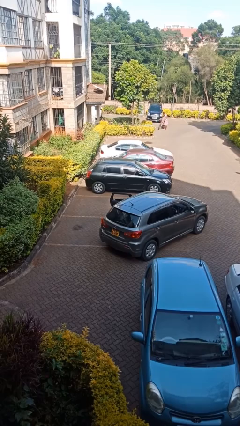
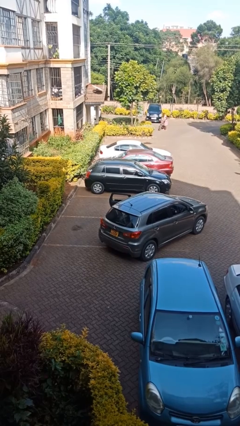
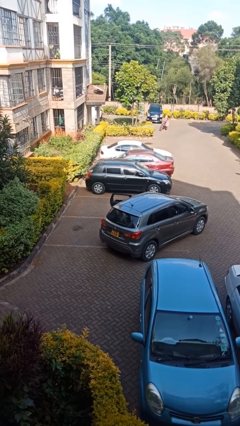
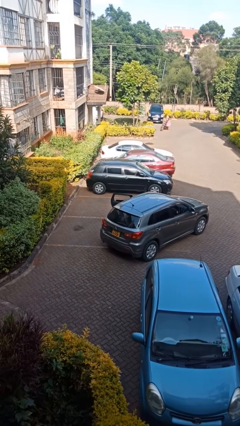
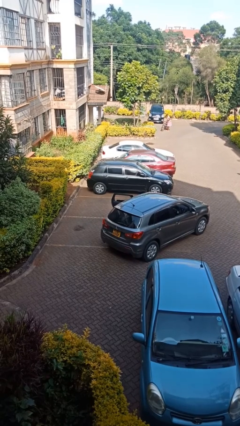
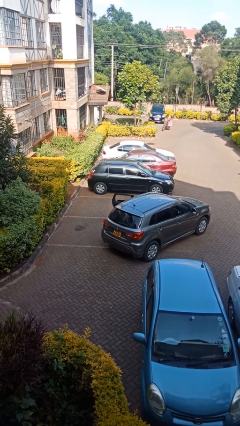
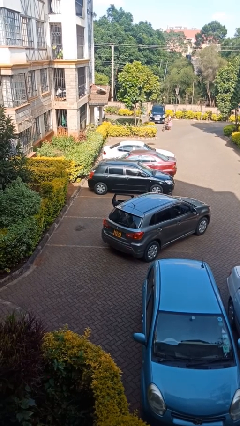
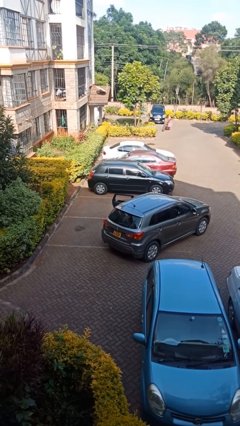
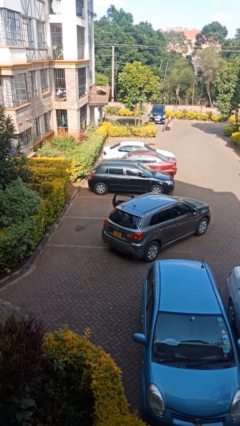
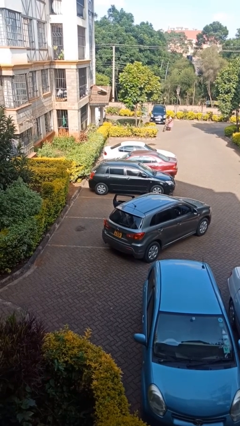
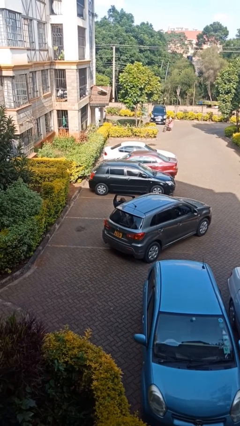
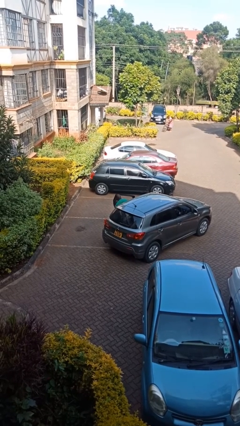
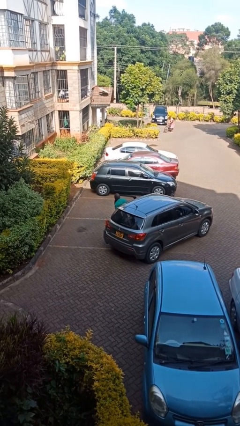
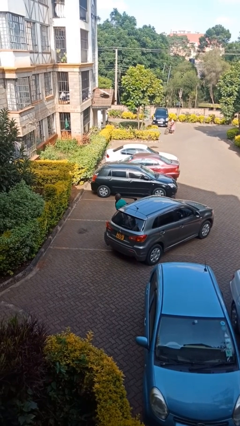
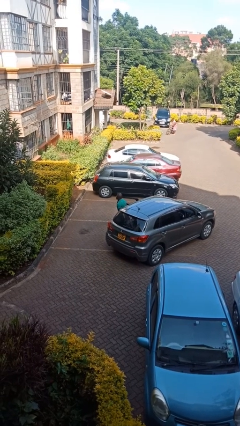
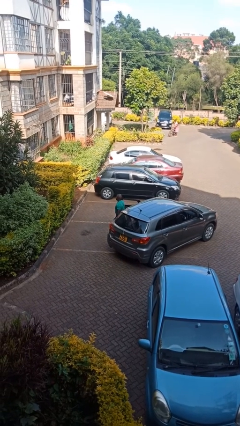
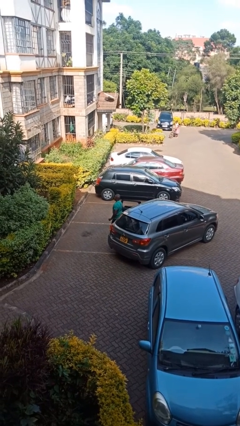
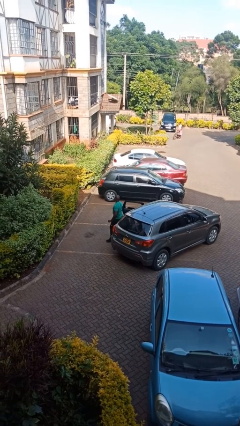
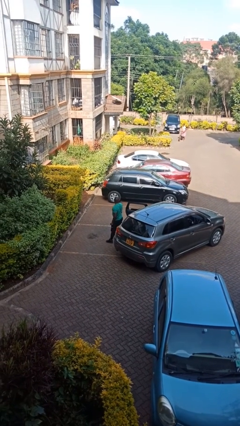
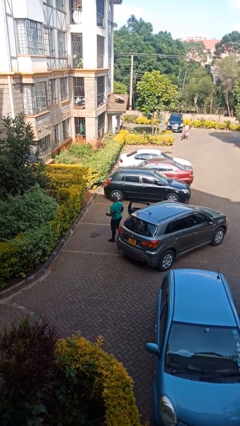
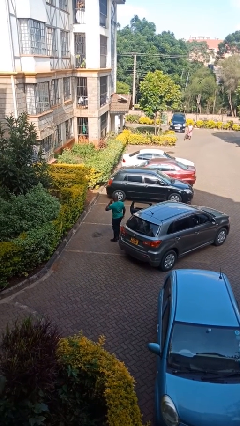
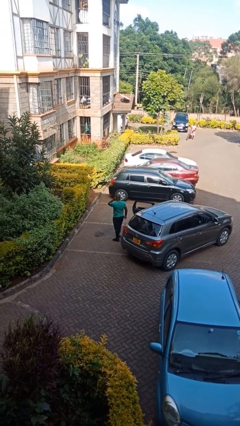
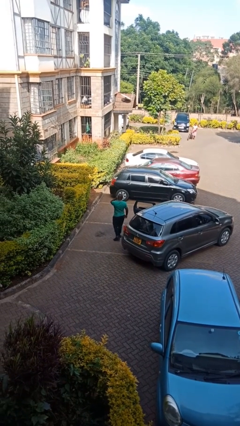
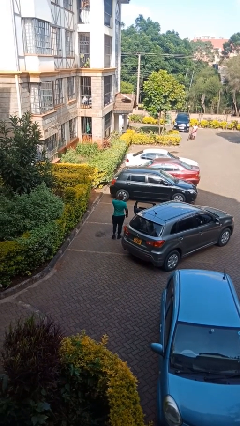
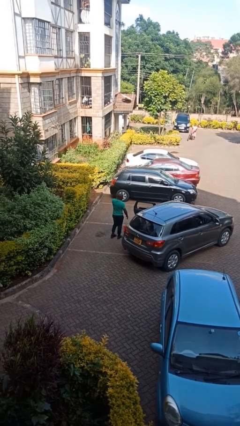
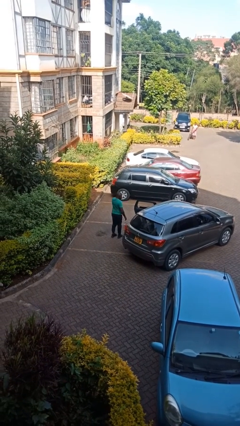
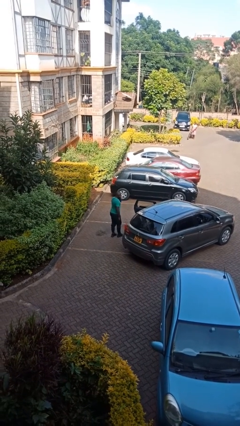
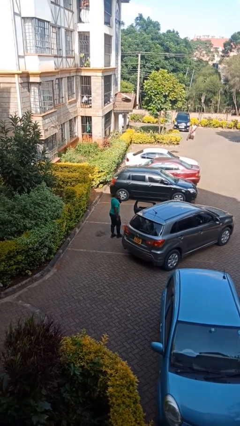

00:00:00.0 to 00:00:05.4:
person exits car

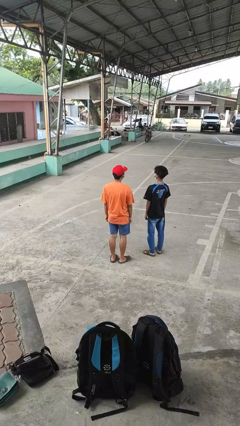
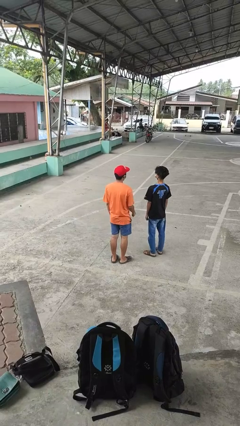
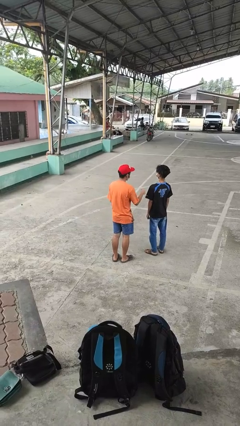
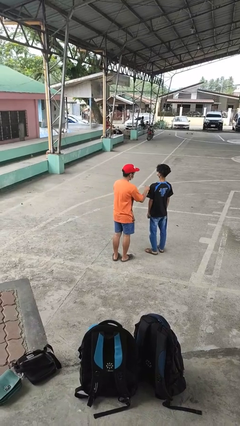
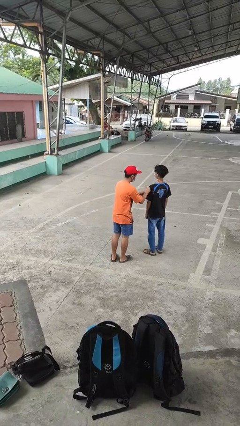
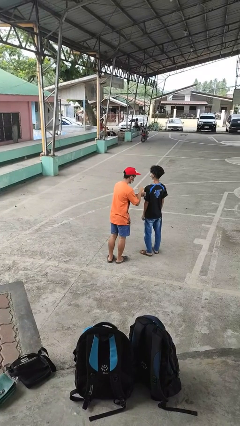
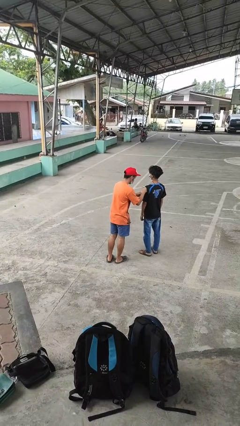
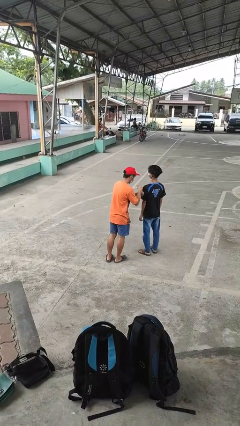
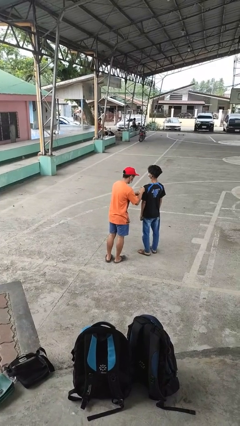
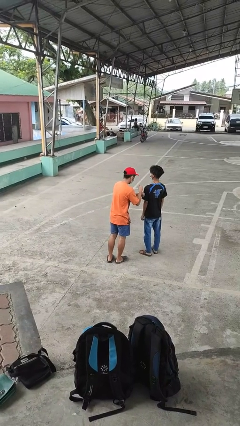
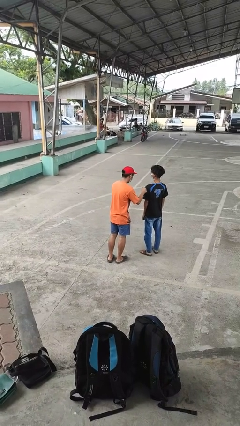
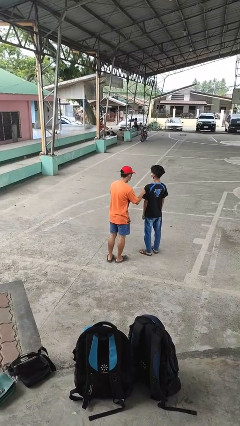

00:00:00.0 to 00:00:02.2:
person pounds shoulders of person

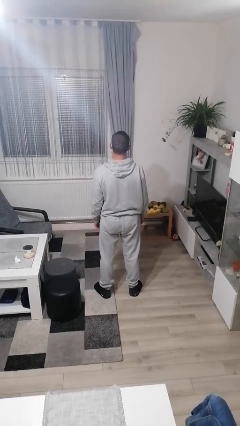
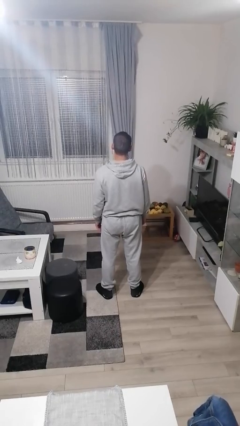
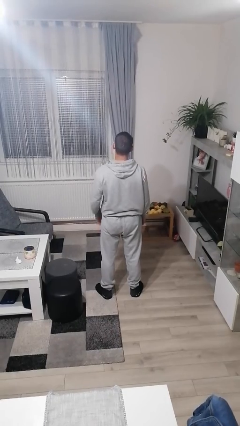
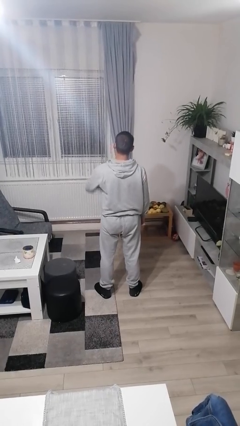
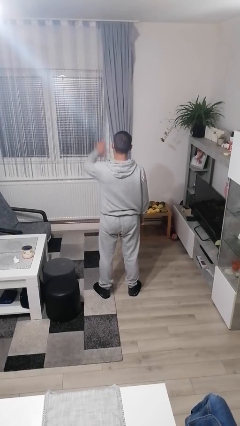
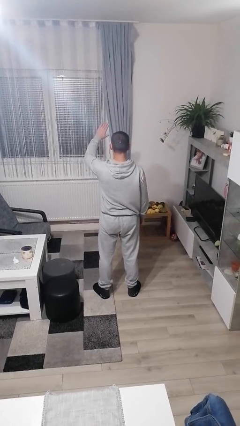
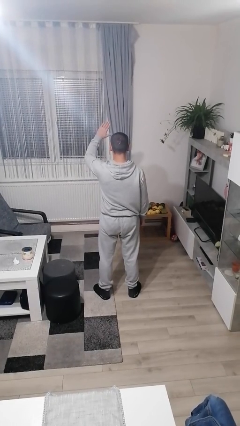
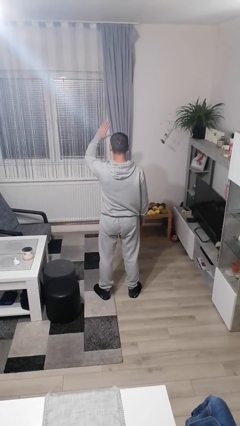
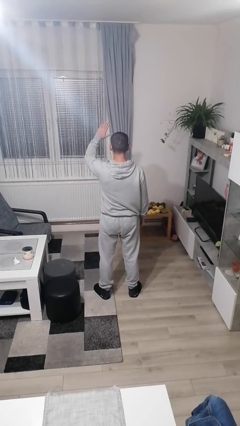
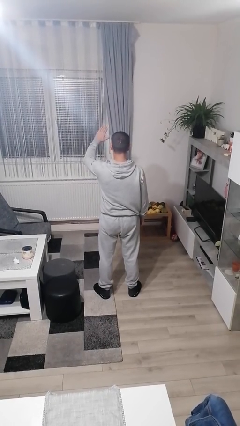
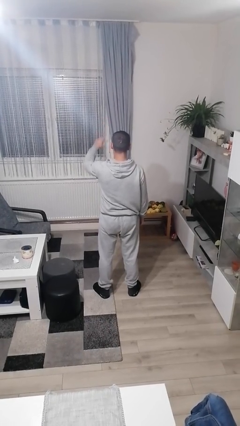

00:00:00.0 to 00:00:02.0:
person salutes

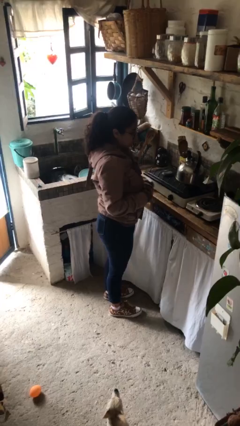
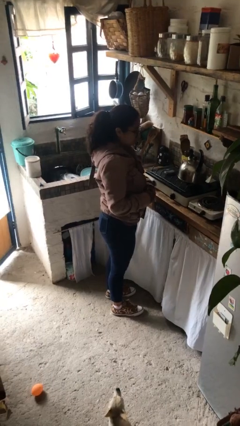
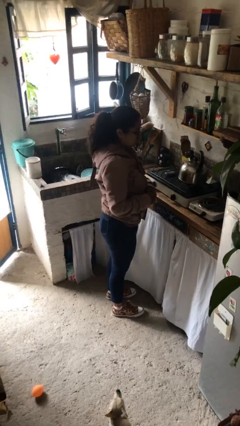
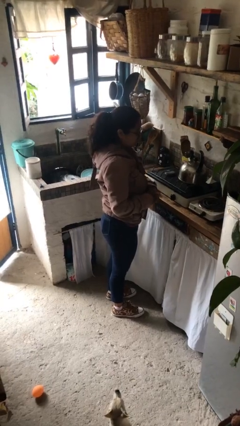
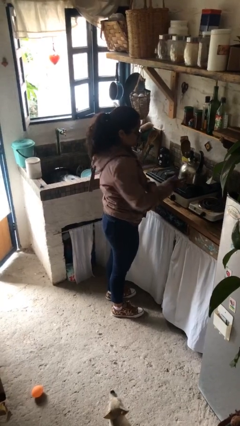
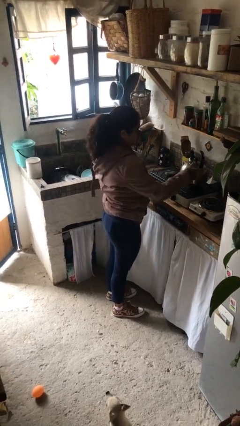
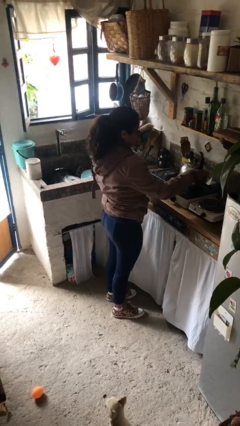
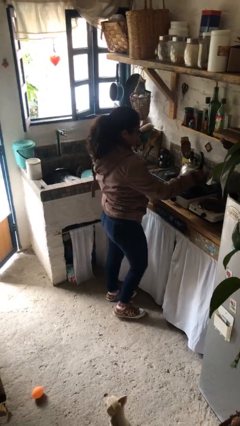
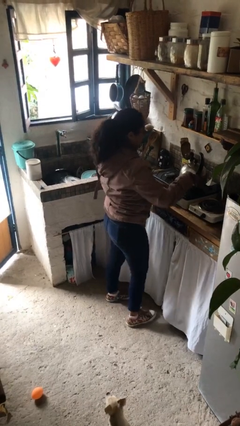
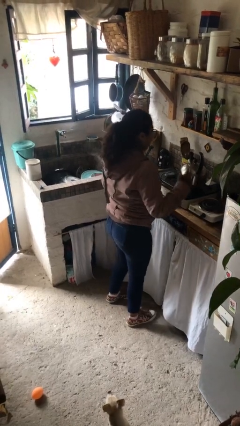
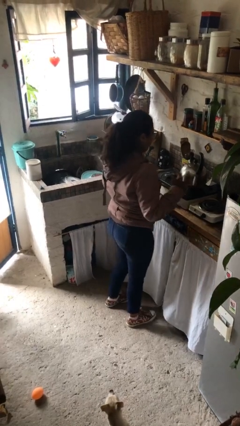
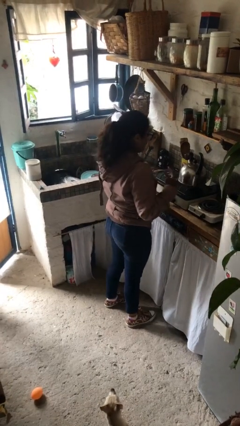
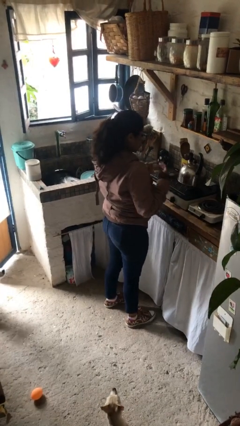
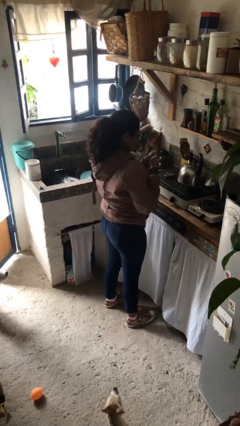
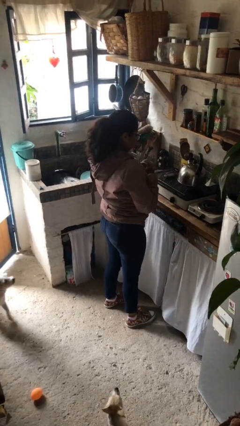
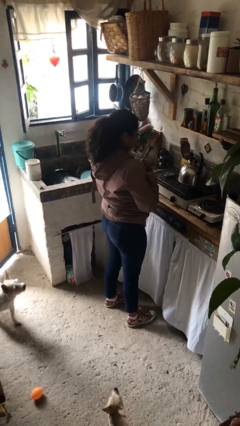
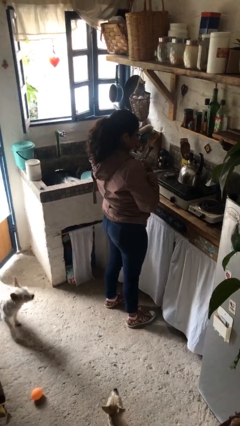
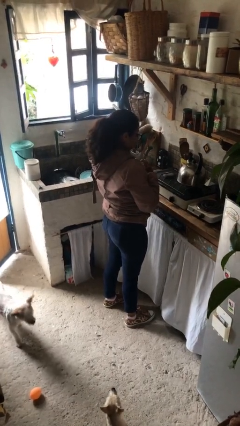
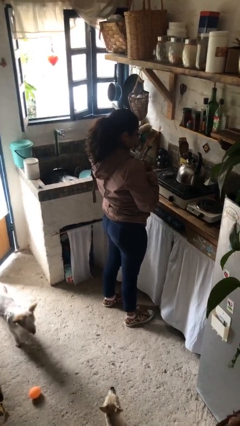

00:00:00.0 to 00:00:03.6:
person burns hand

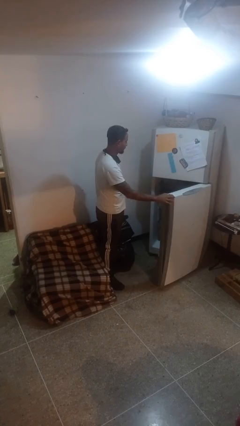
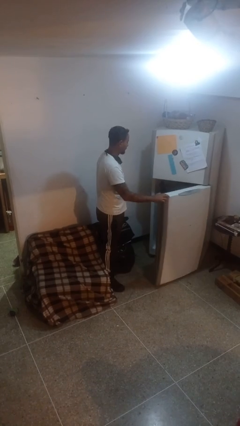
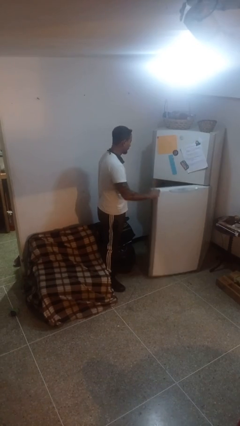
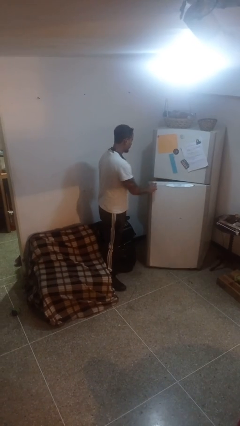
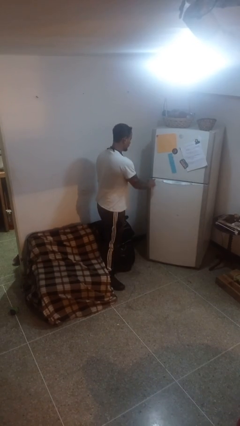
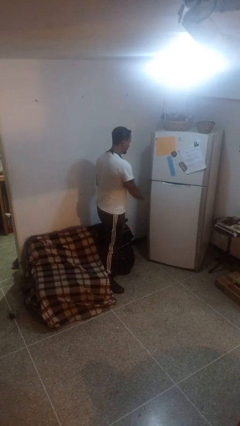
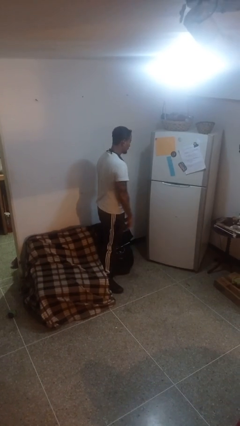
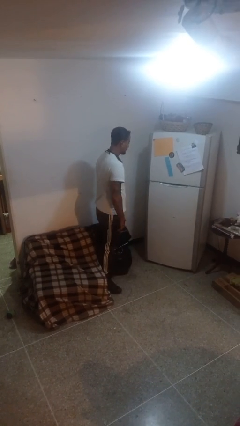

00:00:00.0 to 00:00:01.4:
person closes refrigerator

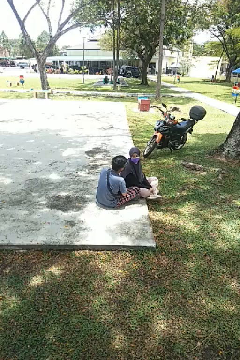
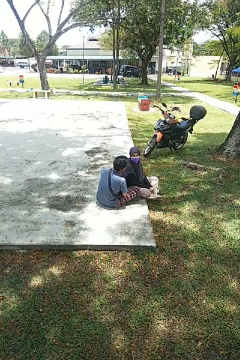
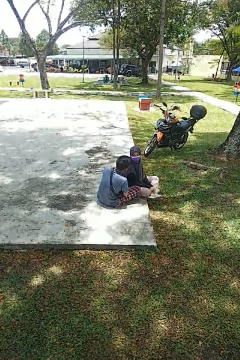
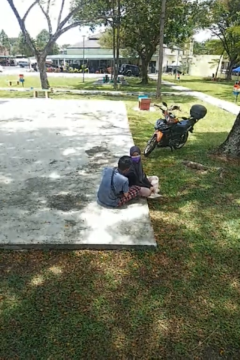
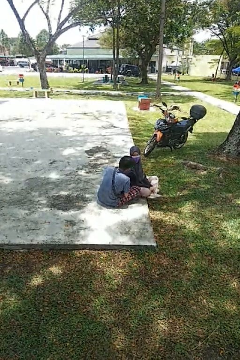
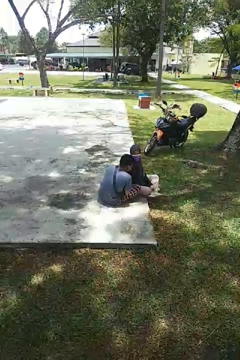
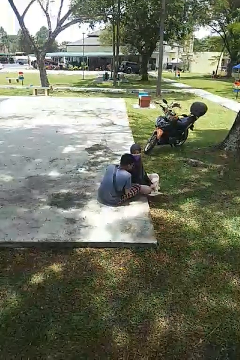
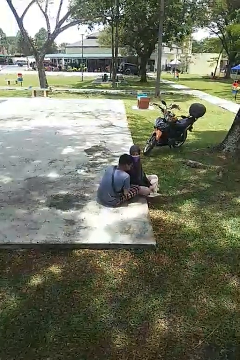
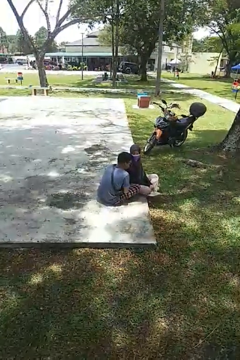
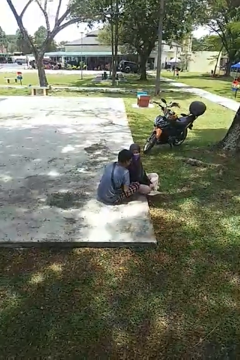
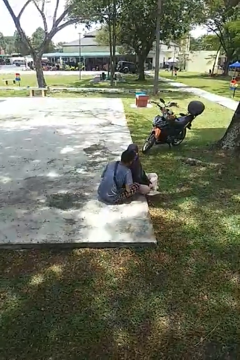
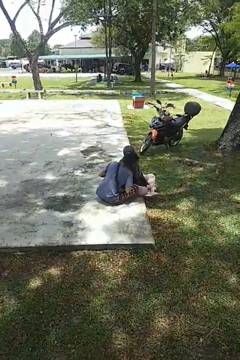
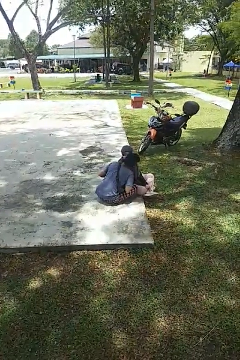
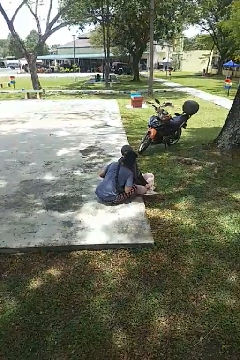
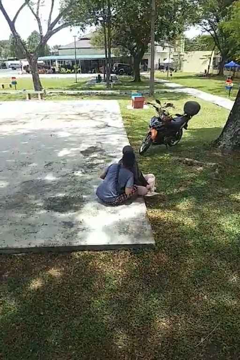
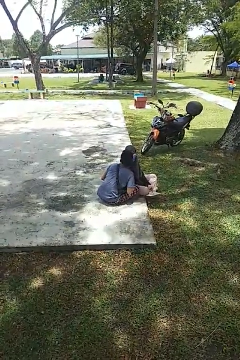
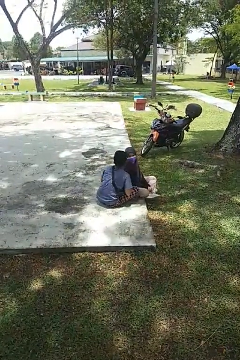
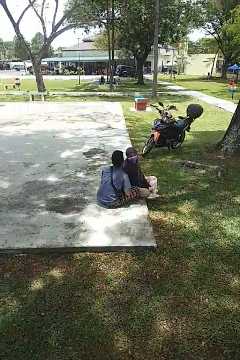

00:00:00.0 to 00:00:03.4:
person kisses cheek of person
